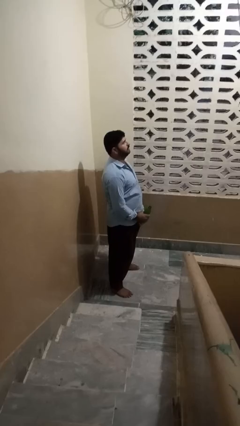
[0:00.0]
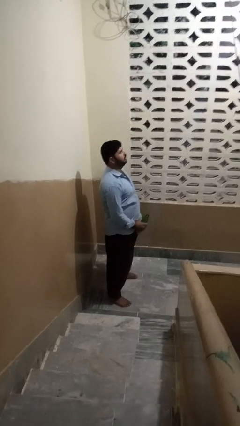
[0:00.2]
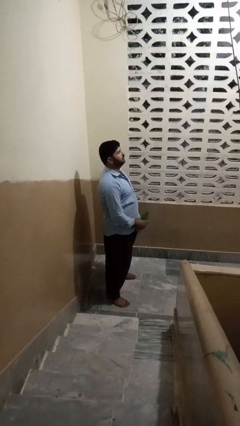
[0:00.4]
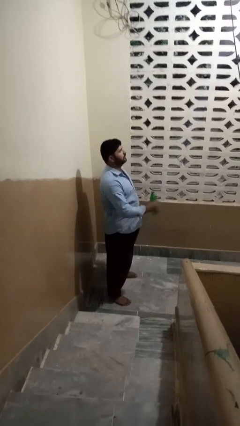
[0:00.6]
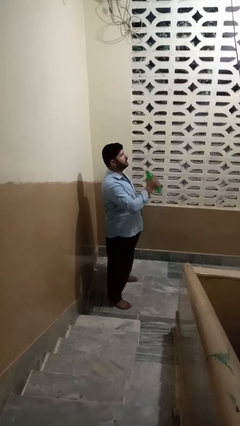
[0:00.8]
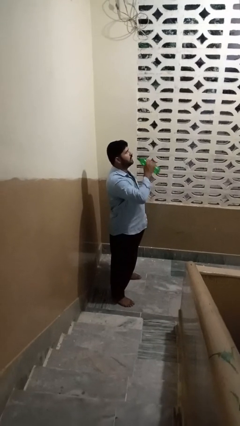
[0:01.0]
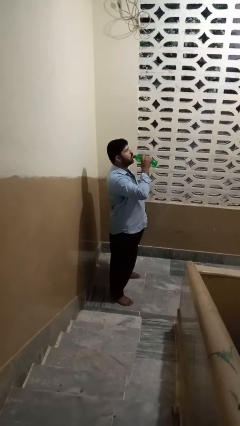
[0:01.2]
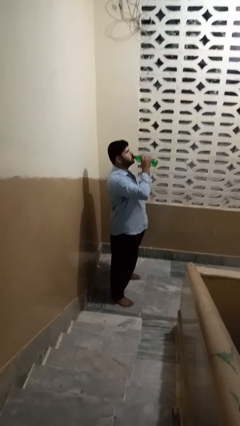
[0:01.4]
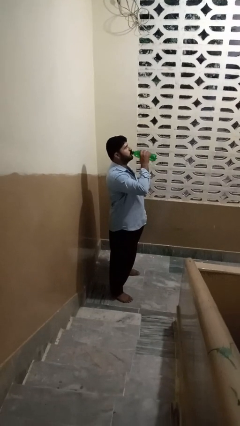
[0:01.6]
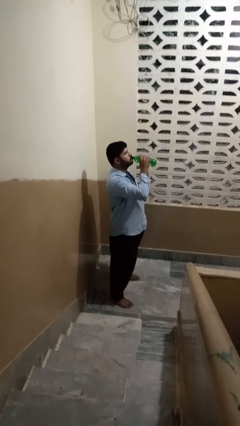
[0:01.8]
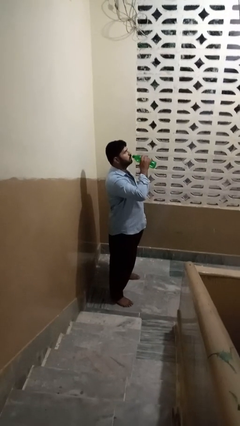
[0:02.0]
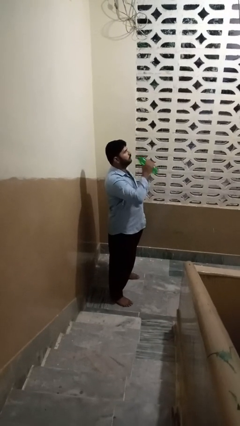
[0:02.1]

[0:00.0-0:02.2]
person drinks from bottle

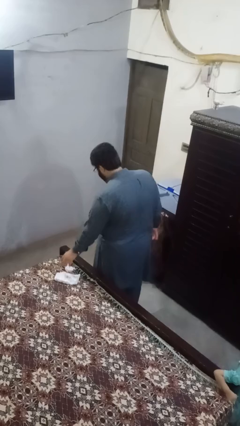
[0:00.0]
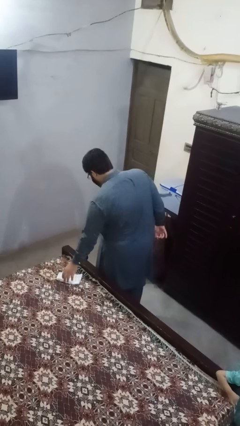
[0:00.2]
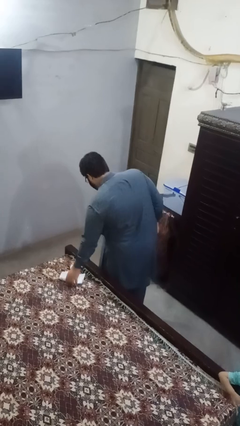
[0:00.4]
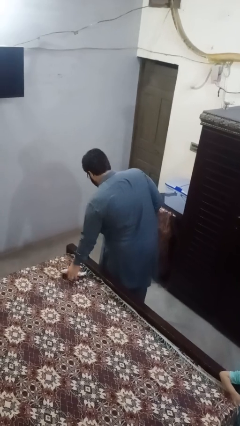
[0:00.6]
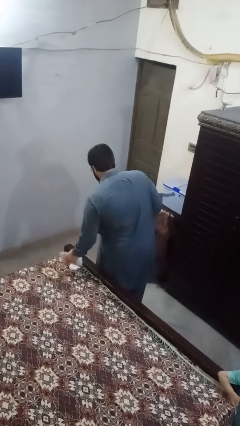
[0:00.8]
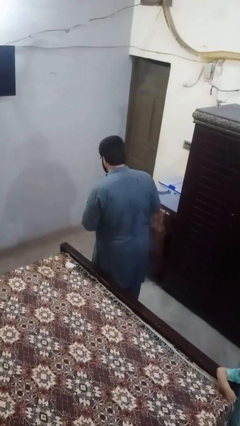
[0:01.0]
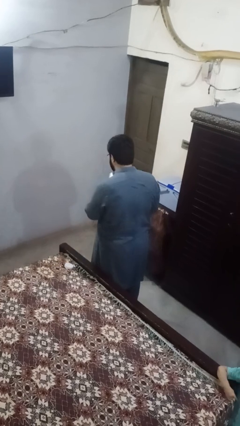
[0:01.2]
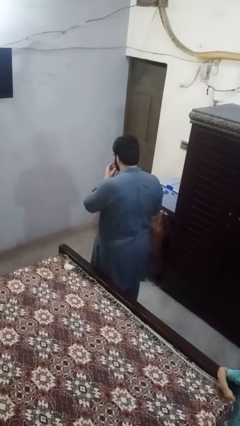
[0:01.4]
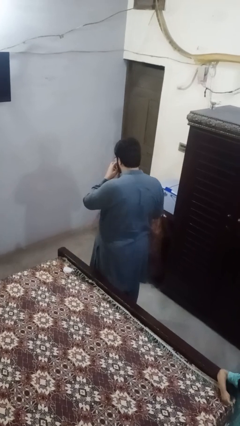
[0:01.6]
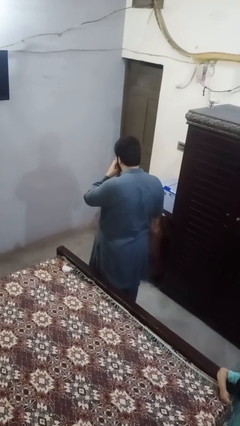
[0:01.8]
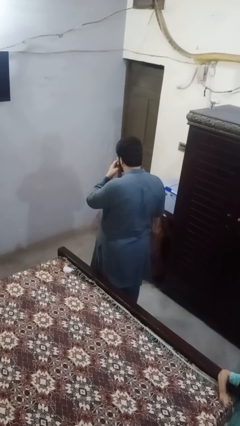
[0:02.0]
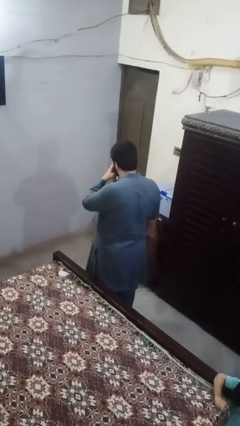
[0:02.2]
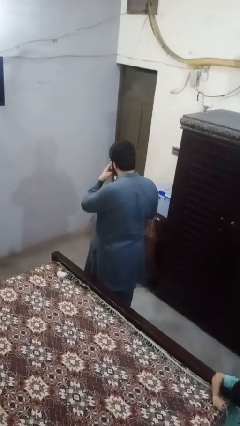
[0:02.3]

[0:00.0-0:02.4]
person picks up object from bed

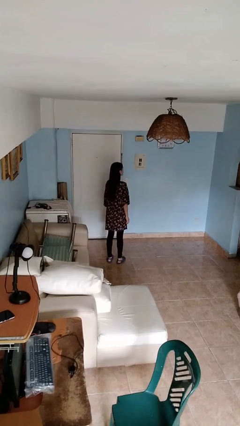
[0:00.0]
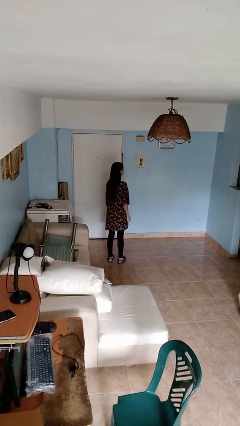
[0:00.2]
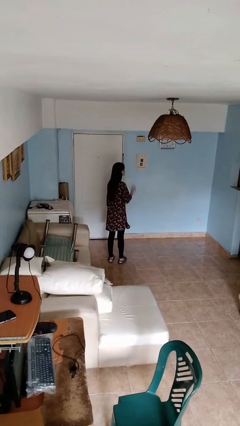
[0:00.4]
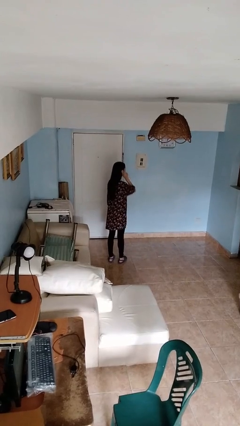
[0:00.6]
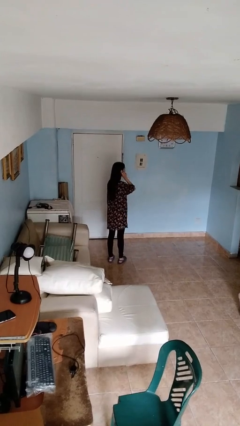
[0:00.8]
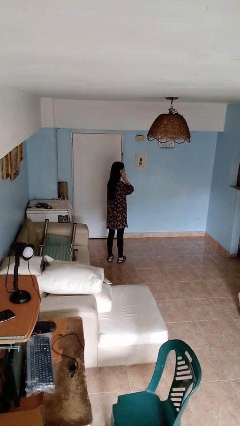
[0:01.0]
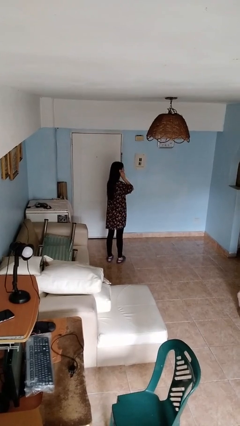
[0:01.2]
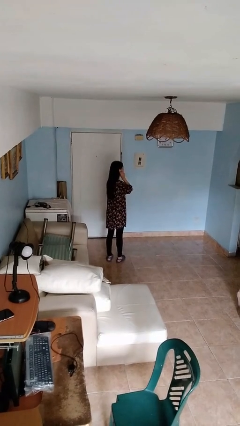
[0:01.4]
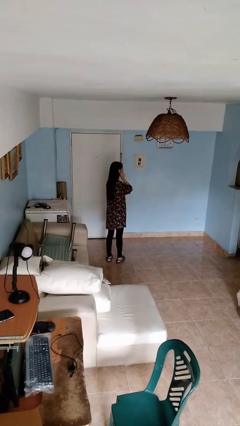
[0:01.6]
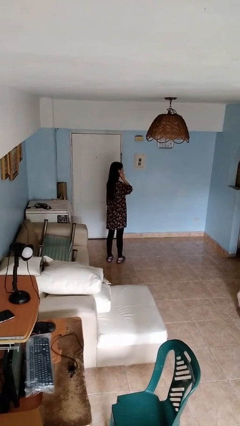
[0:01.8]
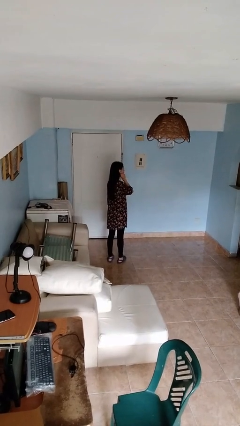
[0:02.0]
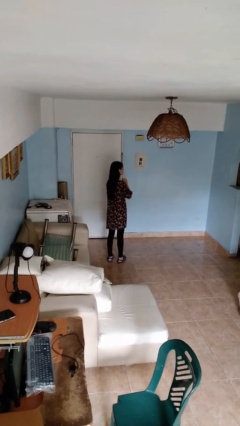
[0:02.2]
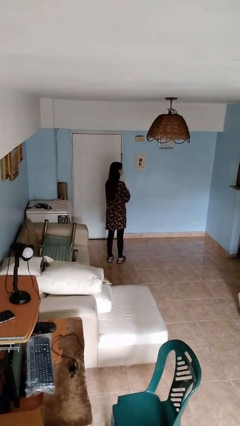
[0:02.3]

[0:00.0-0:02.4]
person touches earlobe

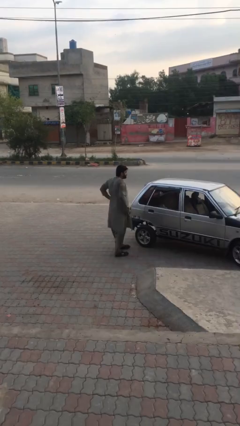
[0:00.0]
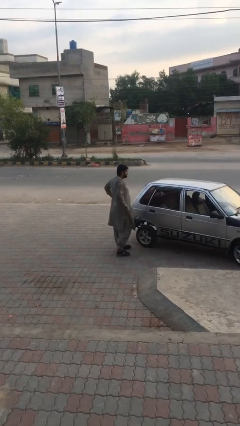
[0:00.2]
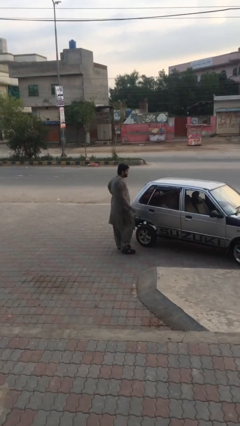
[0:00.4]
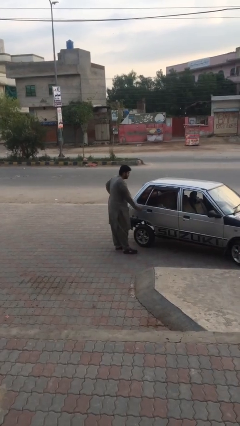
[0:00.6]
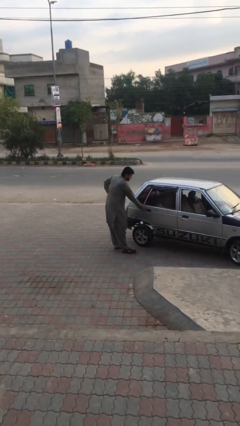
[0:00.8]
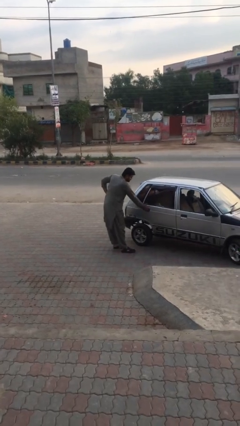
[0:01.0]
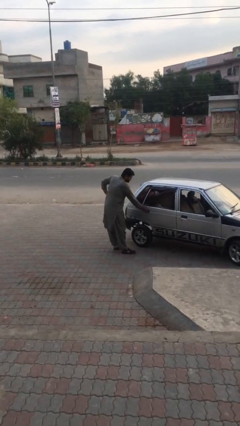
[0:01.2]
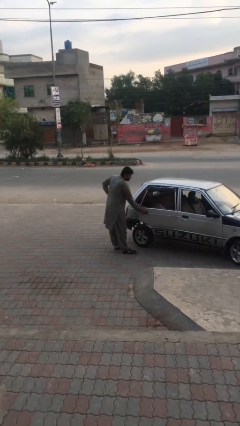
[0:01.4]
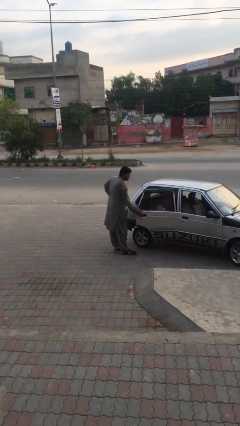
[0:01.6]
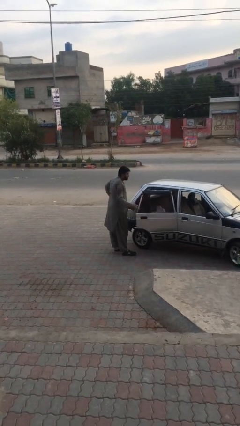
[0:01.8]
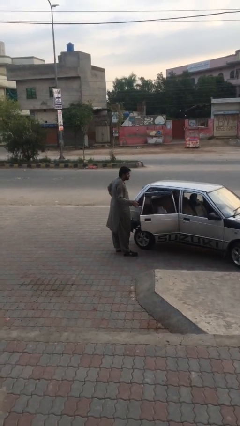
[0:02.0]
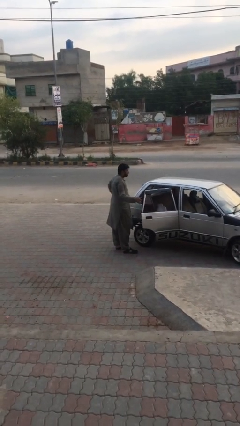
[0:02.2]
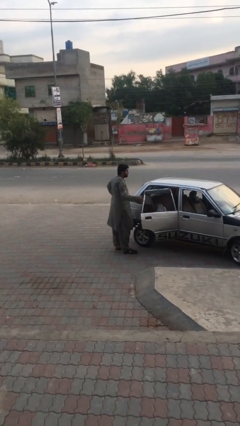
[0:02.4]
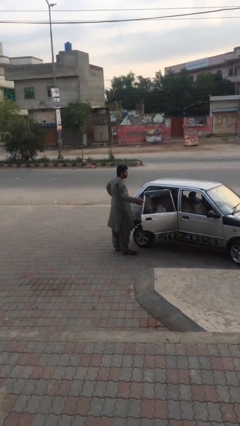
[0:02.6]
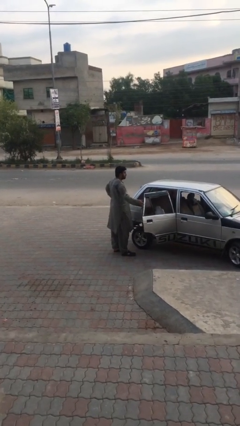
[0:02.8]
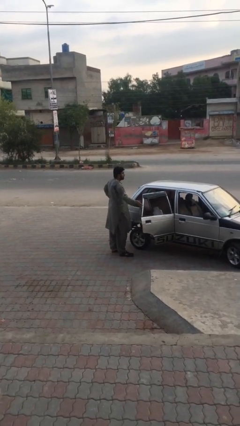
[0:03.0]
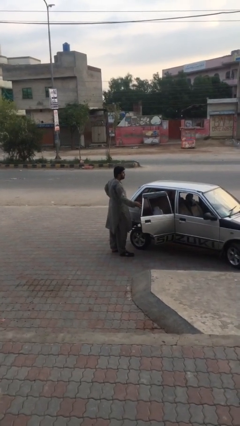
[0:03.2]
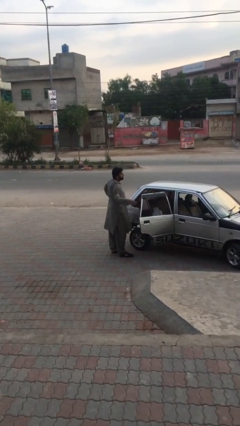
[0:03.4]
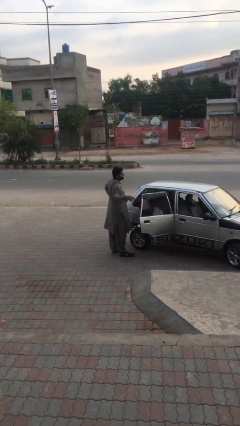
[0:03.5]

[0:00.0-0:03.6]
person opens car door

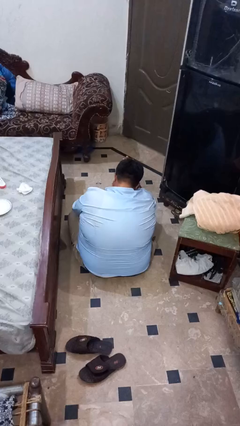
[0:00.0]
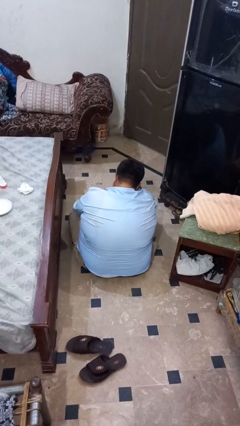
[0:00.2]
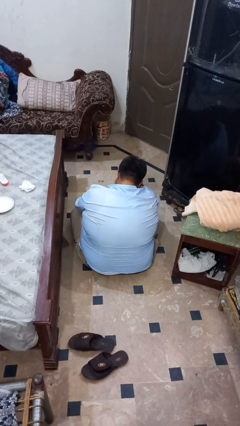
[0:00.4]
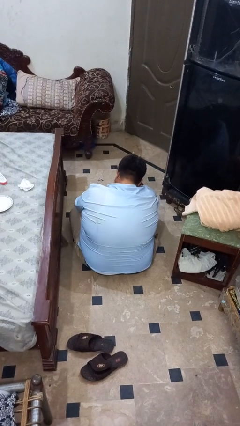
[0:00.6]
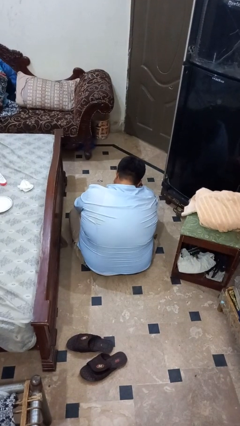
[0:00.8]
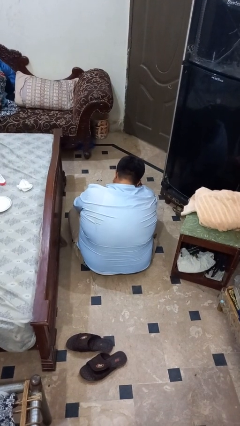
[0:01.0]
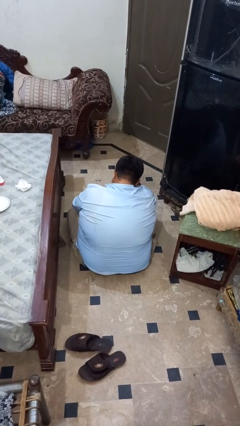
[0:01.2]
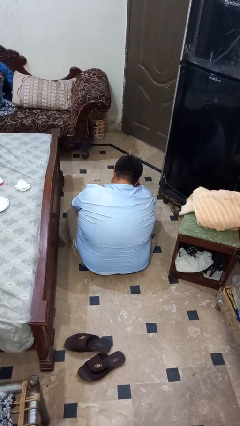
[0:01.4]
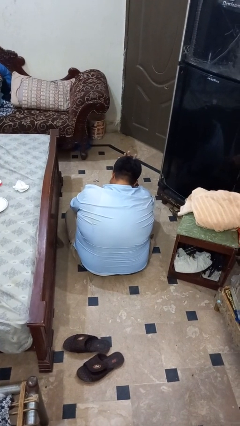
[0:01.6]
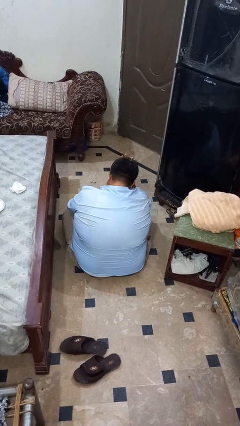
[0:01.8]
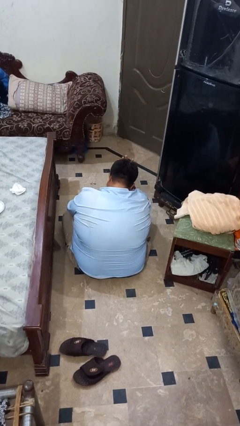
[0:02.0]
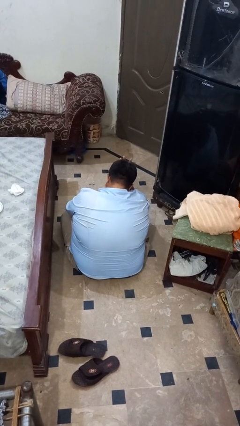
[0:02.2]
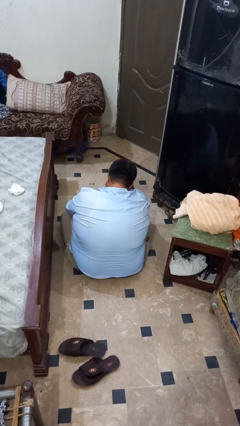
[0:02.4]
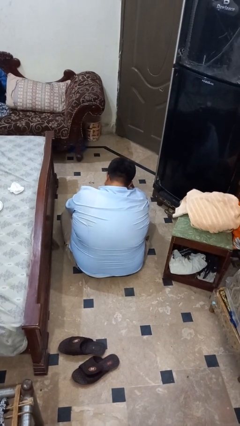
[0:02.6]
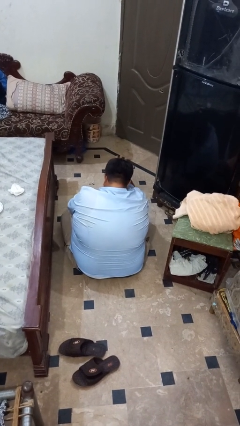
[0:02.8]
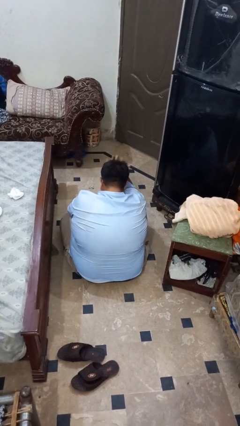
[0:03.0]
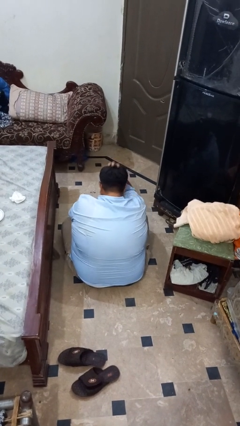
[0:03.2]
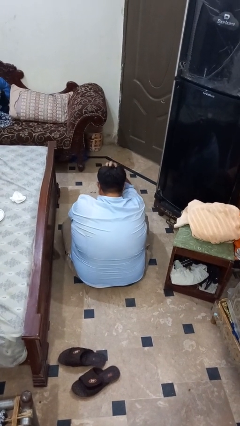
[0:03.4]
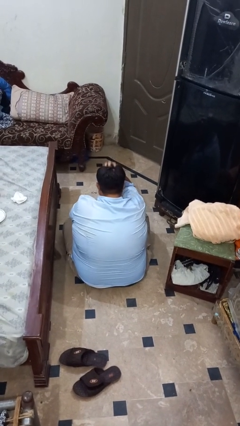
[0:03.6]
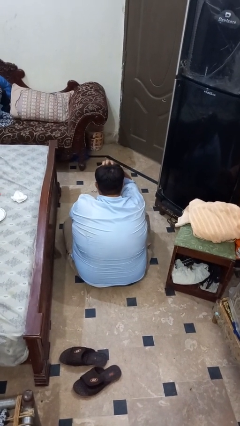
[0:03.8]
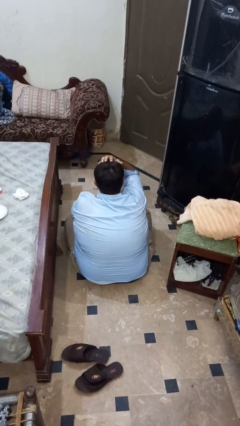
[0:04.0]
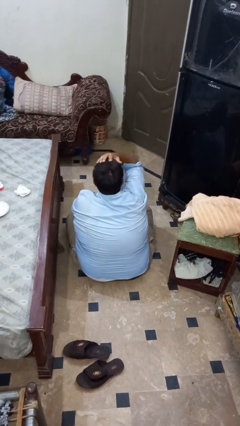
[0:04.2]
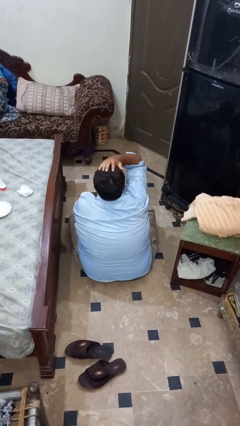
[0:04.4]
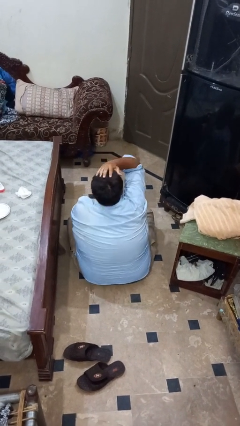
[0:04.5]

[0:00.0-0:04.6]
person pats head

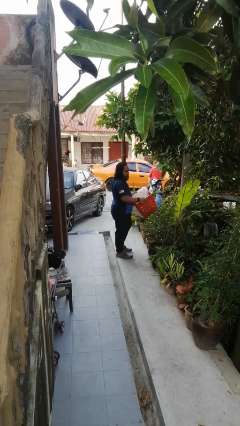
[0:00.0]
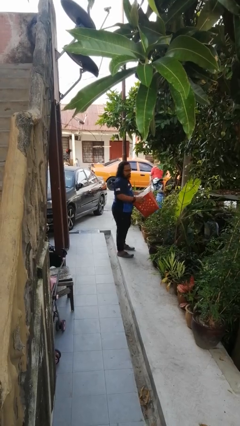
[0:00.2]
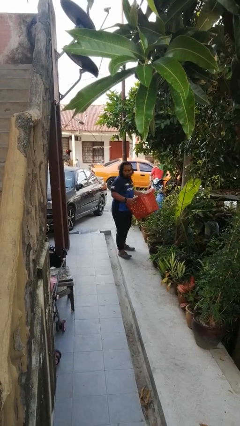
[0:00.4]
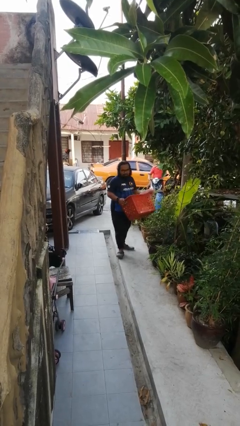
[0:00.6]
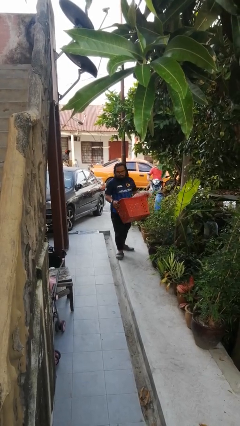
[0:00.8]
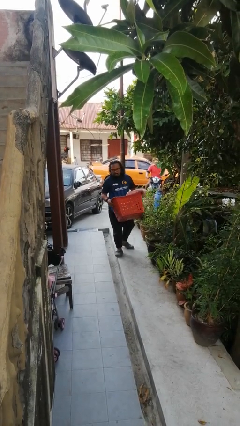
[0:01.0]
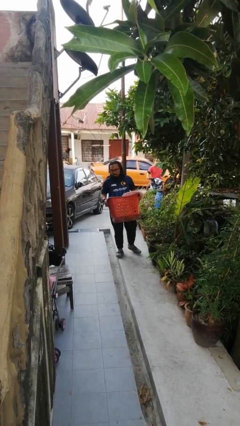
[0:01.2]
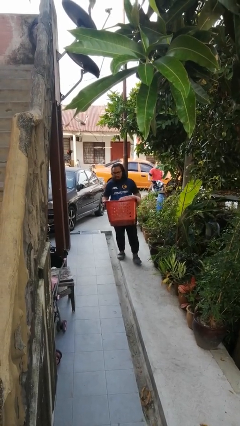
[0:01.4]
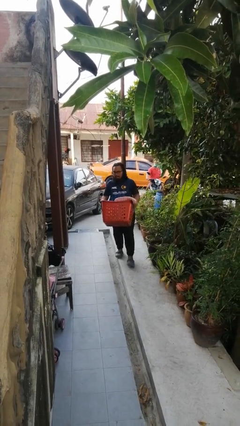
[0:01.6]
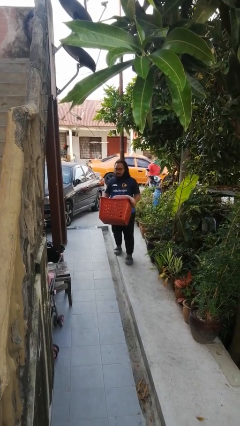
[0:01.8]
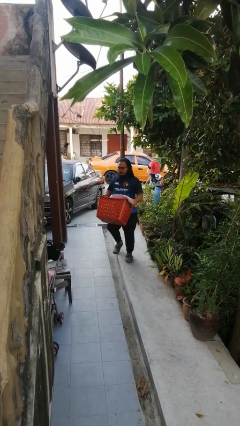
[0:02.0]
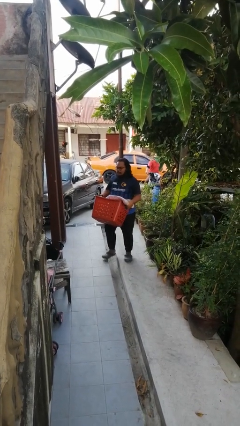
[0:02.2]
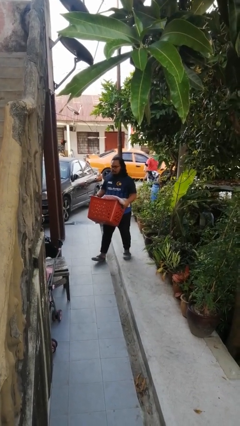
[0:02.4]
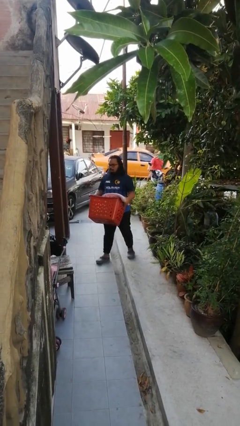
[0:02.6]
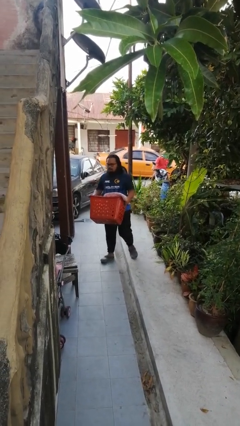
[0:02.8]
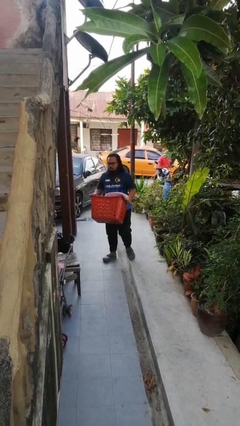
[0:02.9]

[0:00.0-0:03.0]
person carries laundry basket
